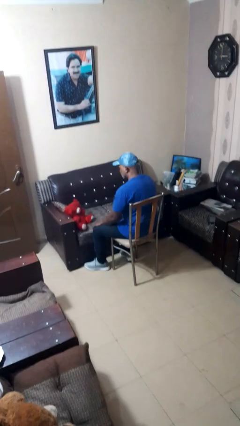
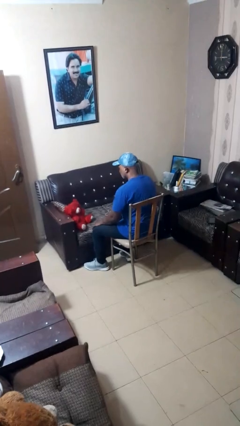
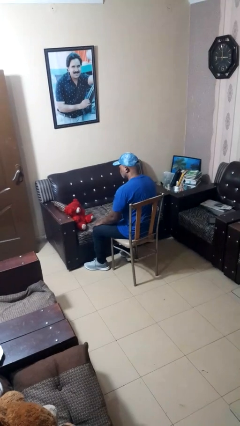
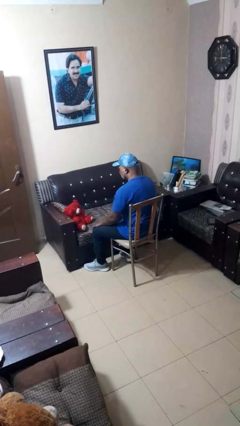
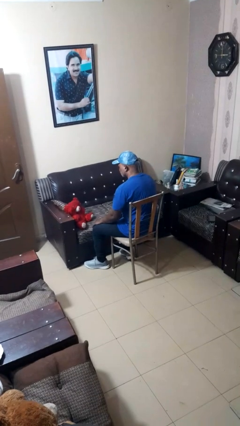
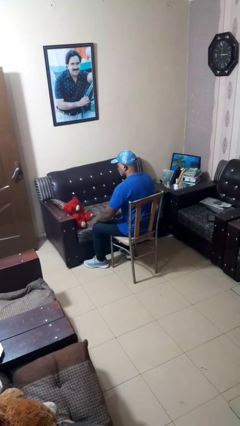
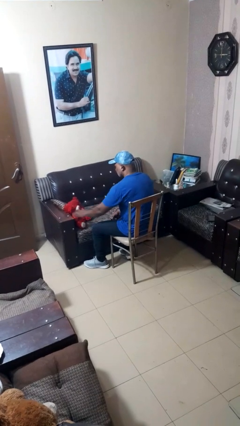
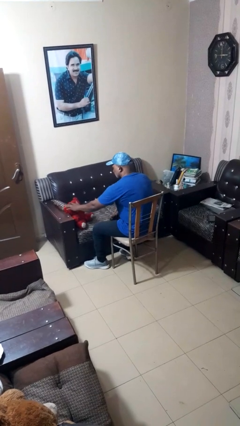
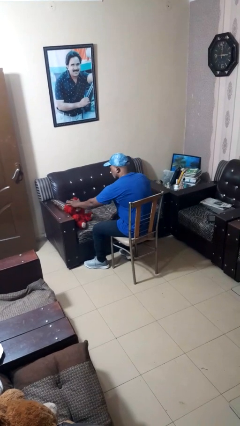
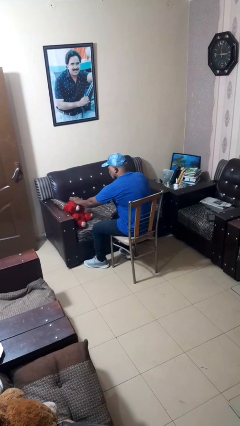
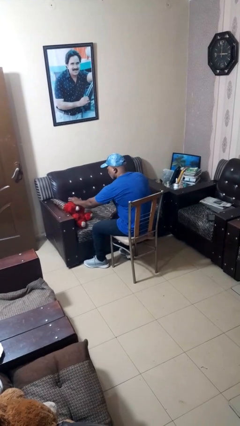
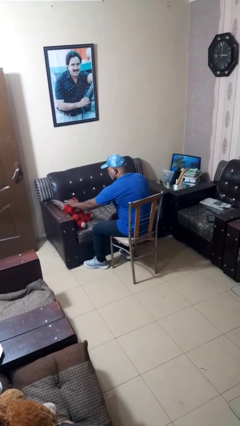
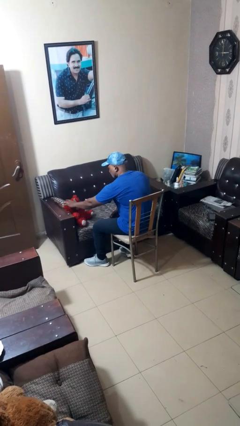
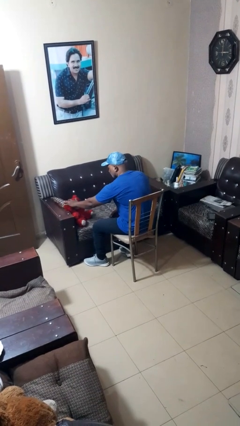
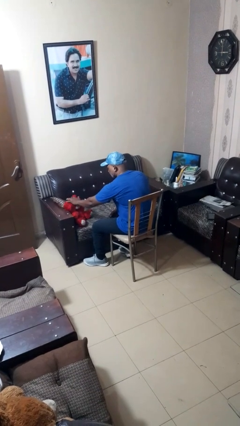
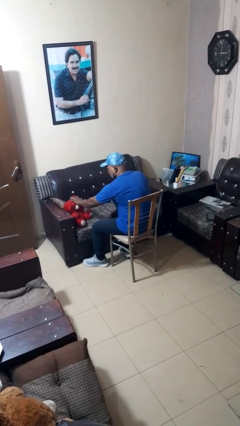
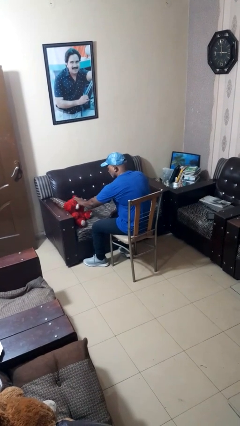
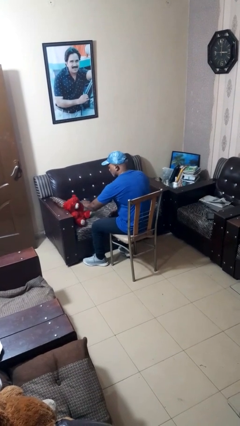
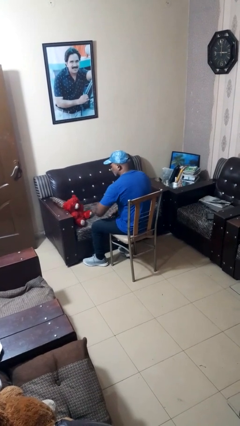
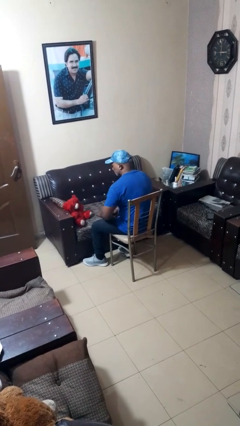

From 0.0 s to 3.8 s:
person waves hand over object

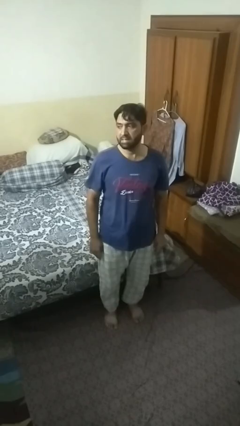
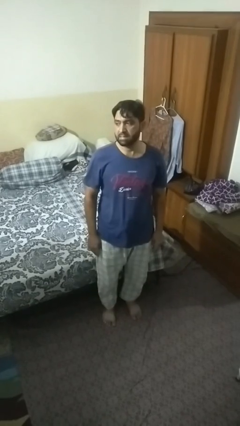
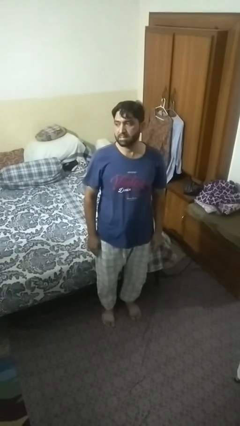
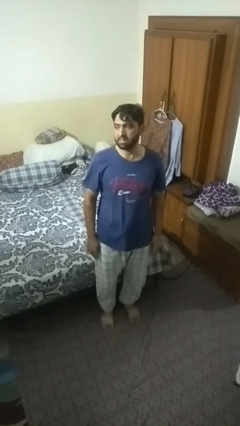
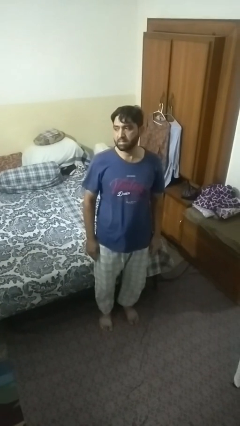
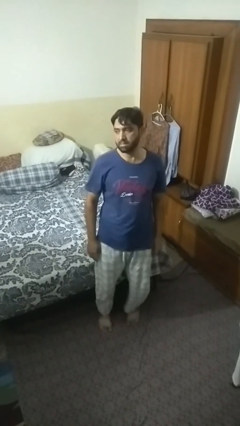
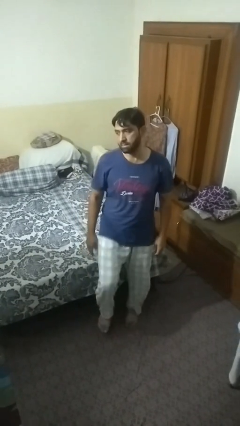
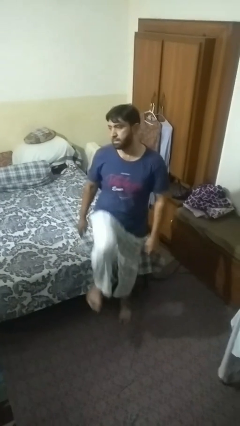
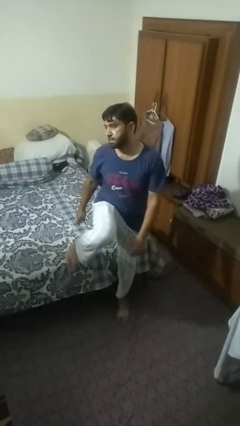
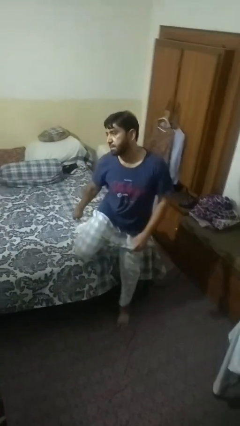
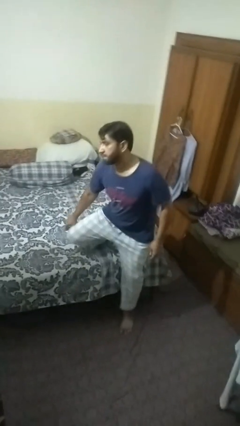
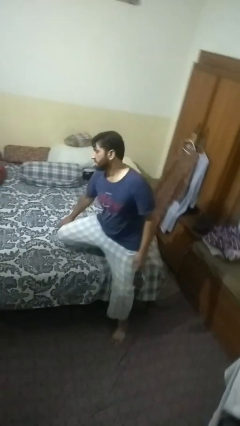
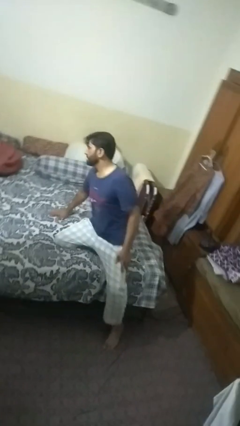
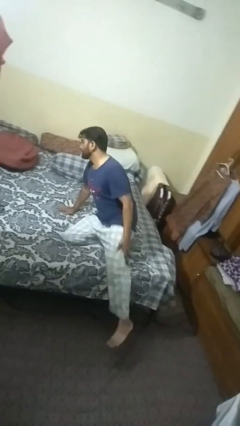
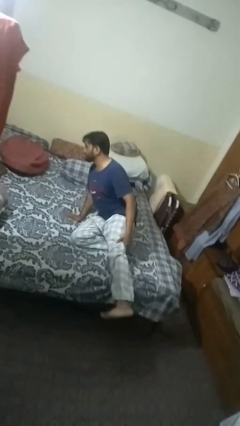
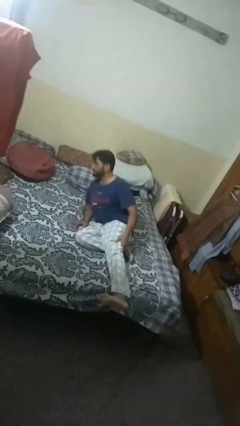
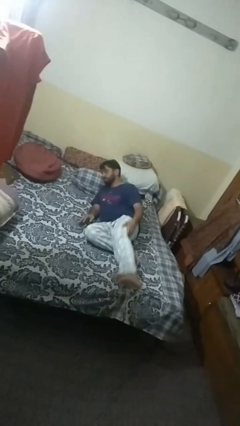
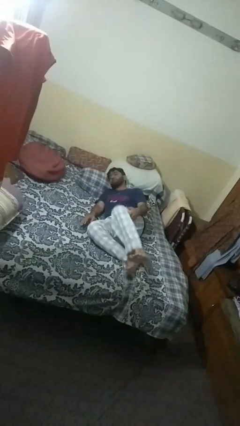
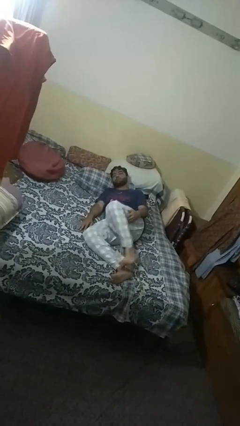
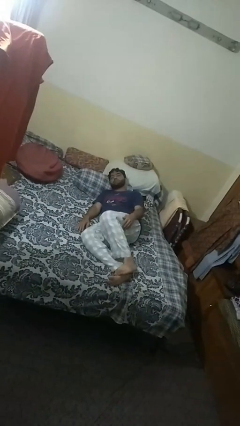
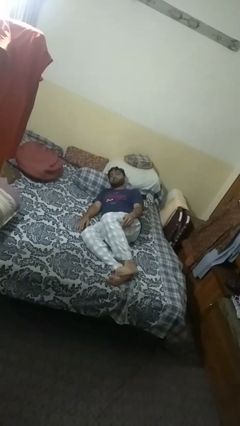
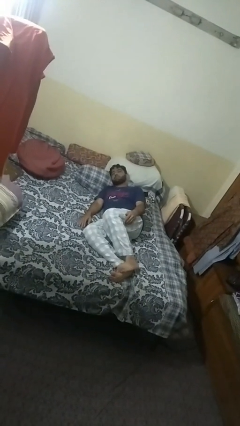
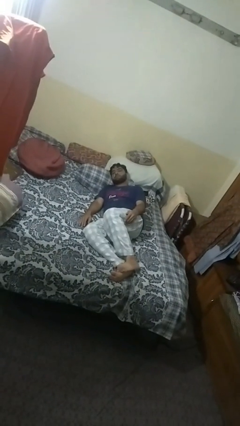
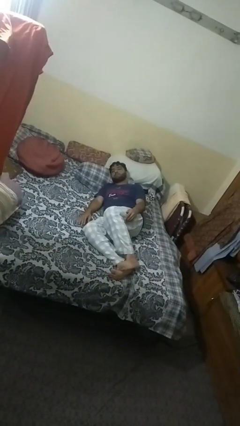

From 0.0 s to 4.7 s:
person lies down on bed

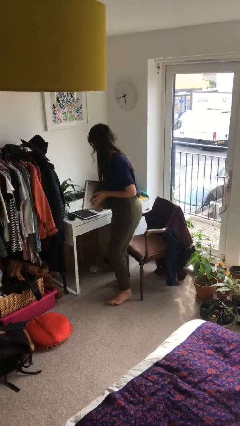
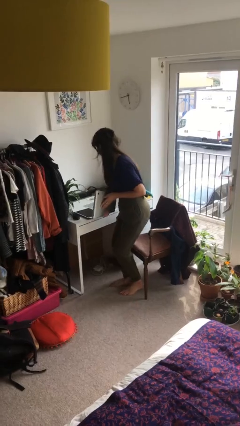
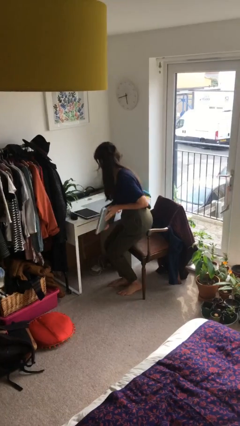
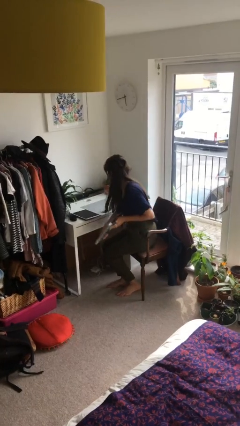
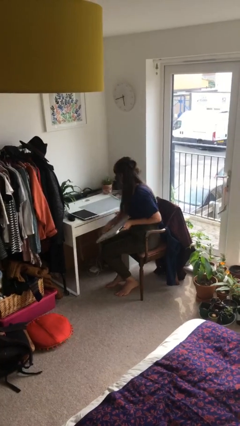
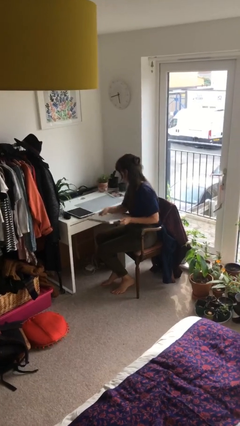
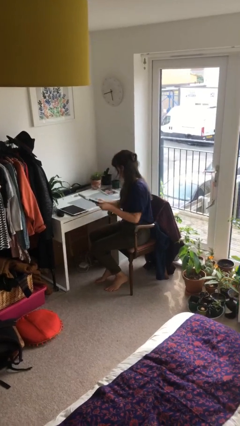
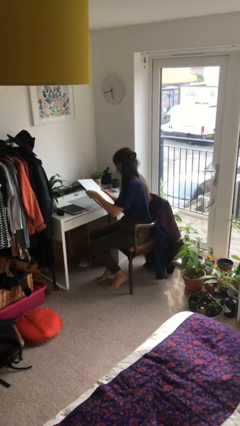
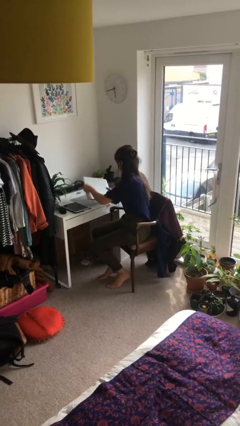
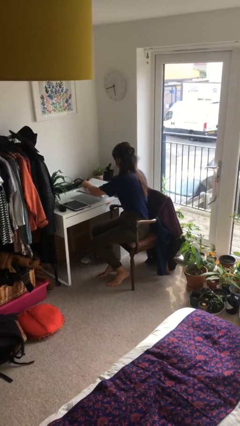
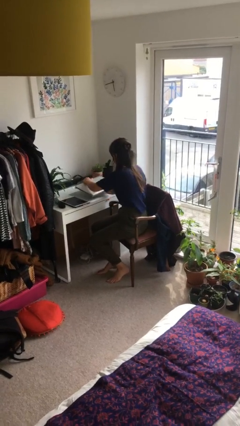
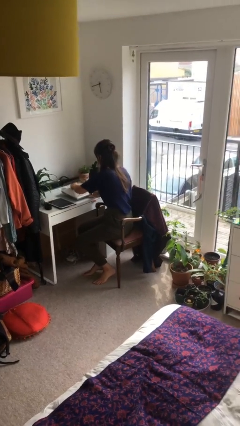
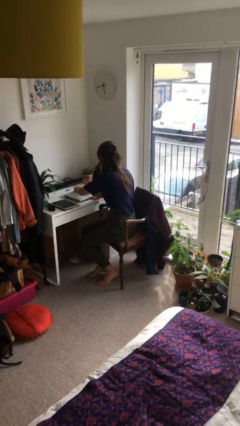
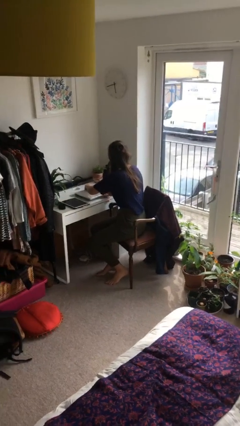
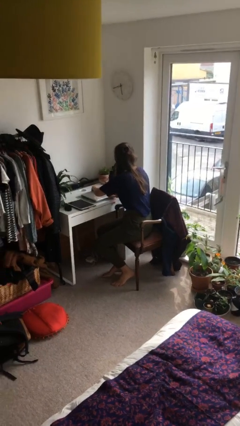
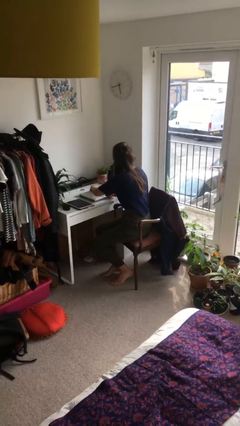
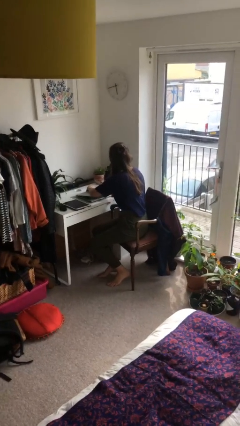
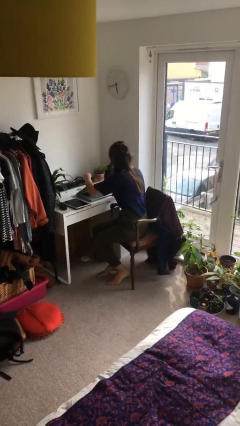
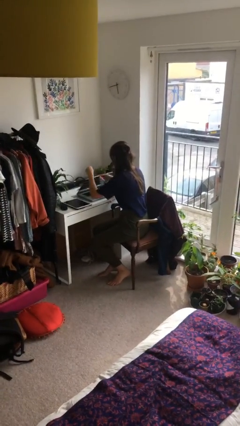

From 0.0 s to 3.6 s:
person sits down

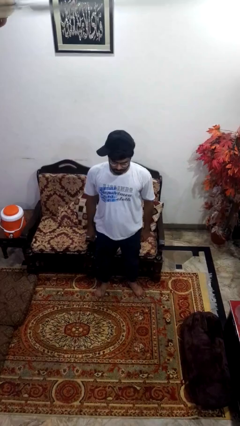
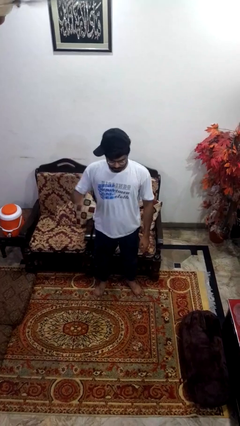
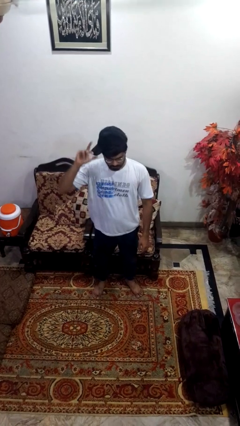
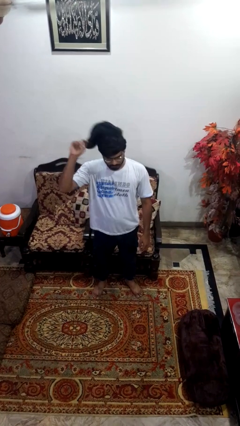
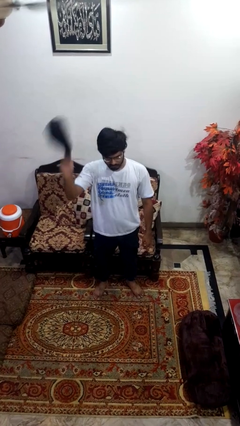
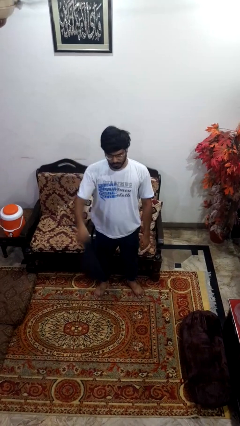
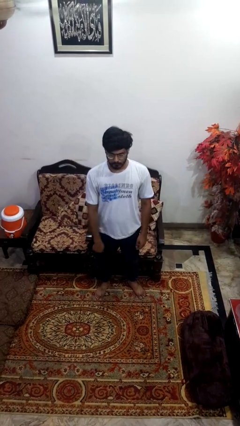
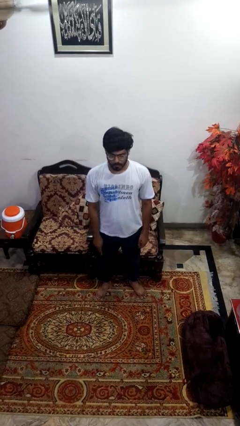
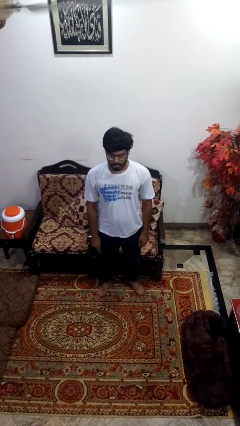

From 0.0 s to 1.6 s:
person takes off hat

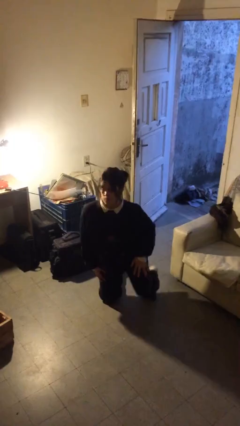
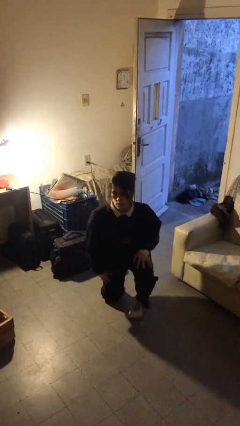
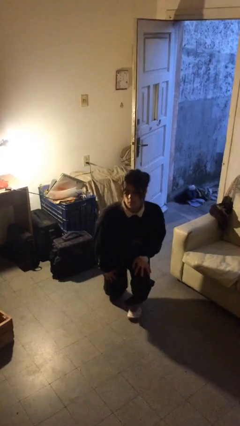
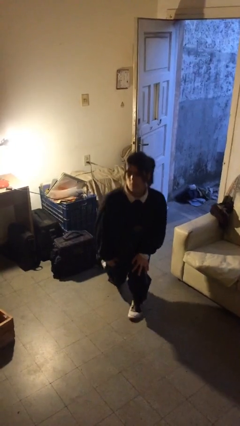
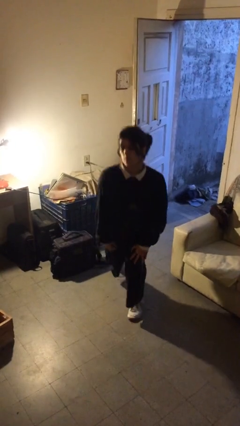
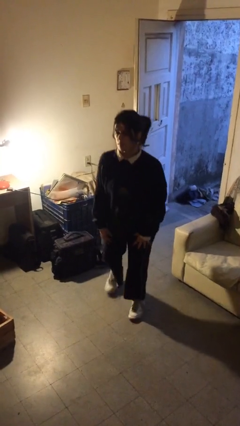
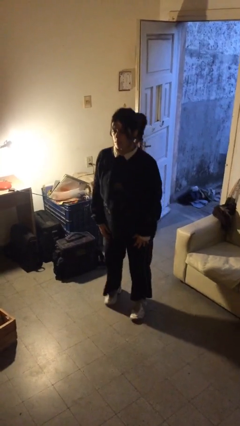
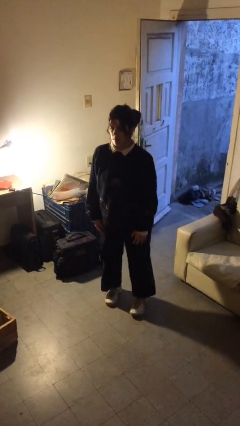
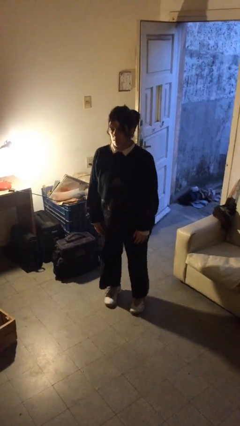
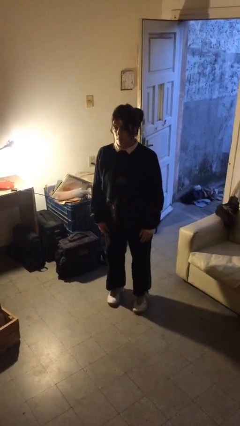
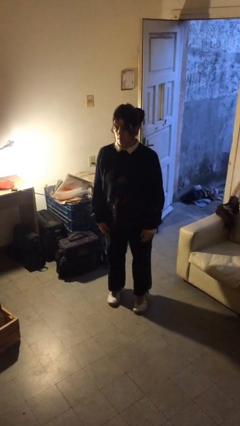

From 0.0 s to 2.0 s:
person stands up from floor

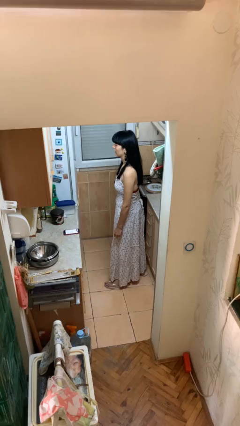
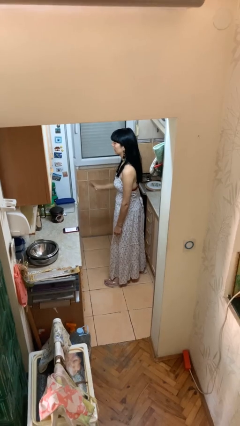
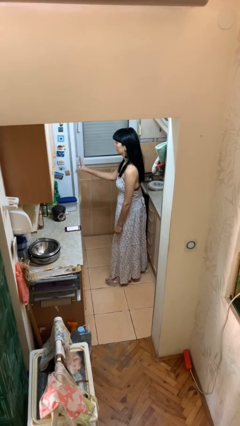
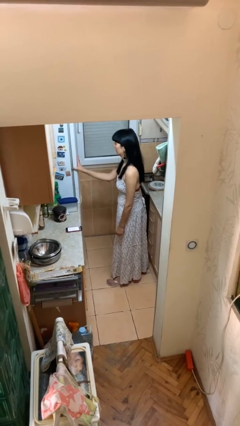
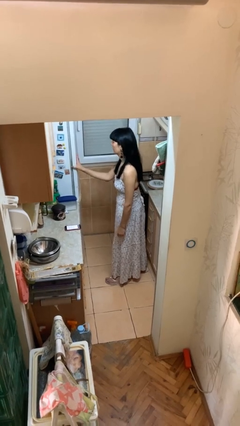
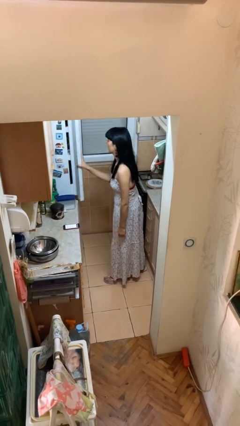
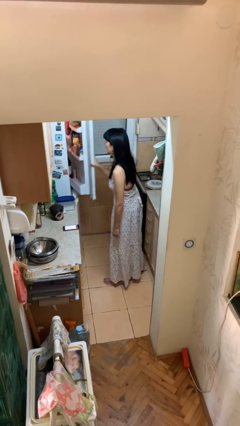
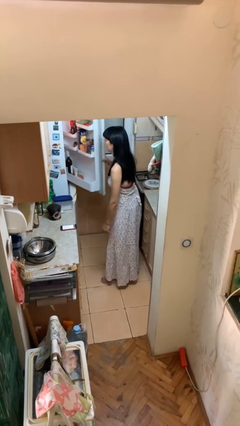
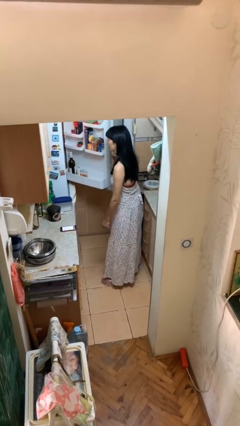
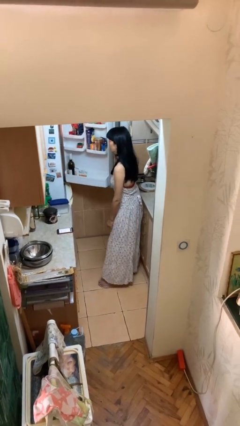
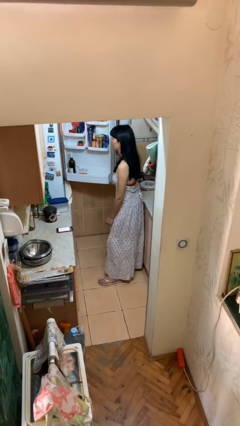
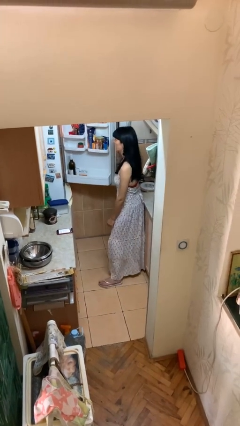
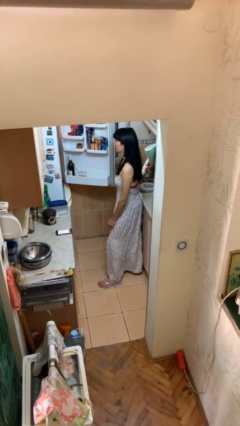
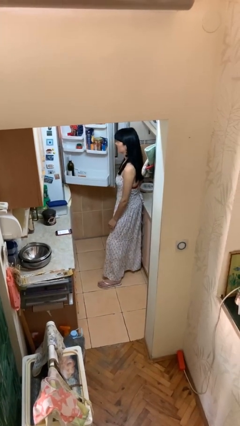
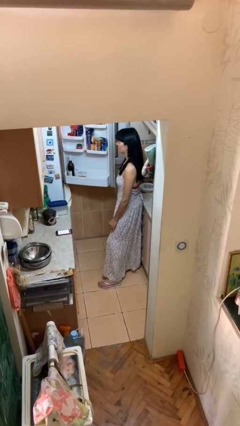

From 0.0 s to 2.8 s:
person opens refrigerator
